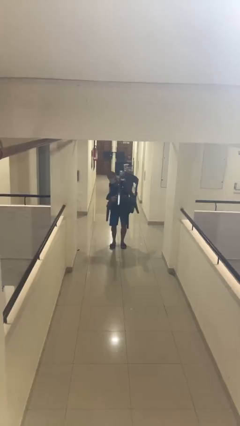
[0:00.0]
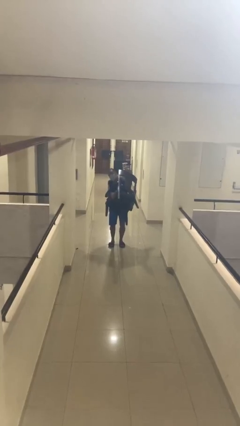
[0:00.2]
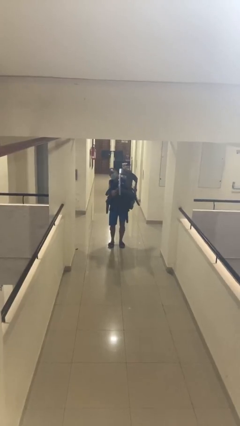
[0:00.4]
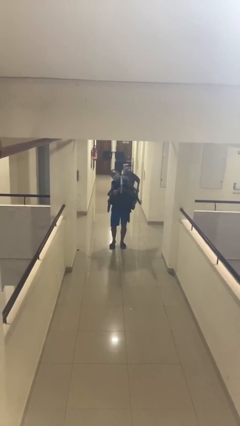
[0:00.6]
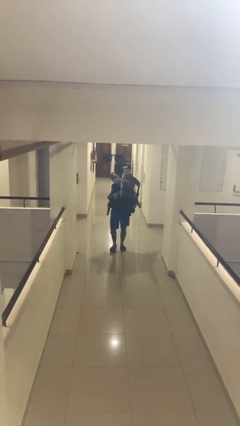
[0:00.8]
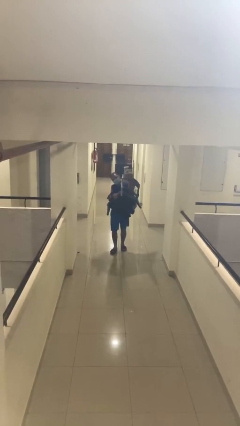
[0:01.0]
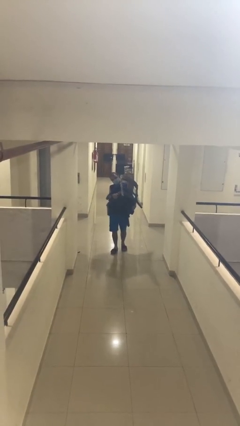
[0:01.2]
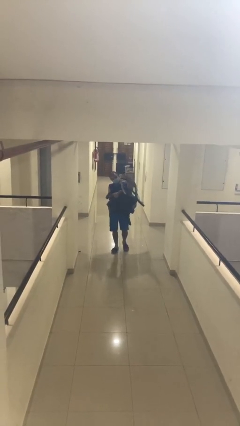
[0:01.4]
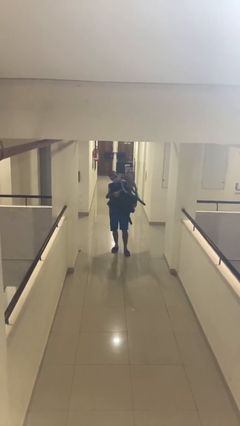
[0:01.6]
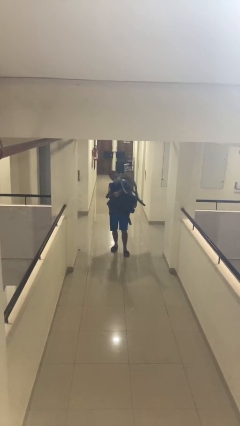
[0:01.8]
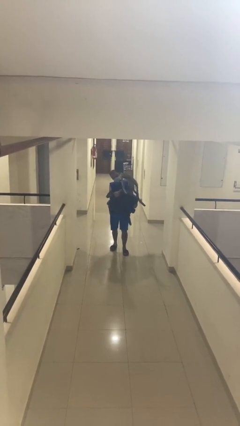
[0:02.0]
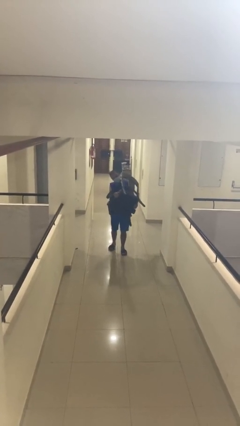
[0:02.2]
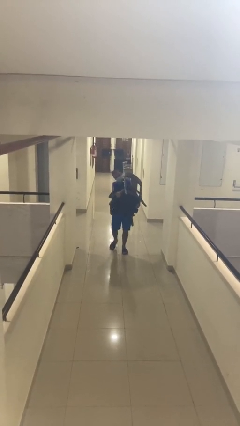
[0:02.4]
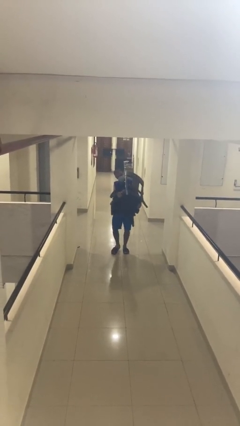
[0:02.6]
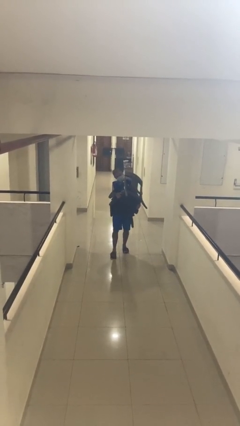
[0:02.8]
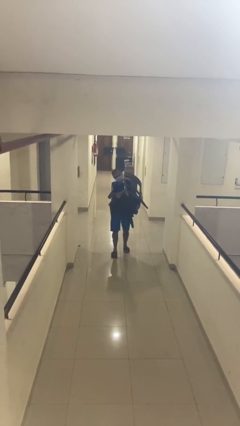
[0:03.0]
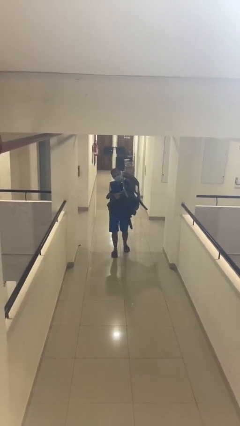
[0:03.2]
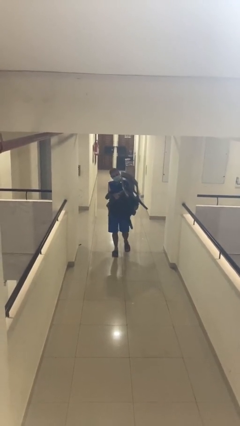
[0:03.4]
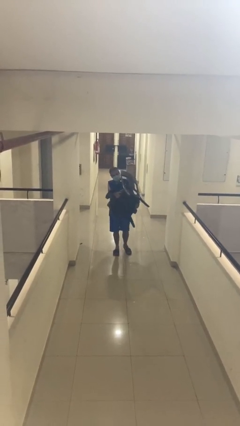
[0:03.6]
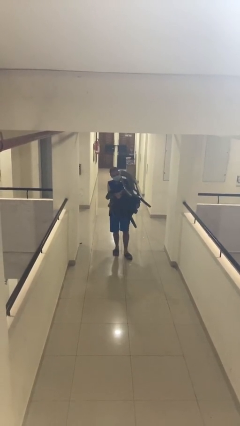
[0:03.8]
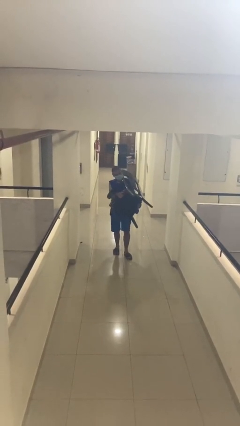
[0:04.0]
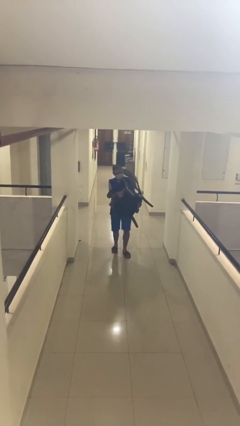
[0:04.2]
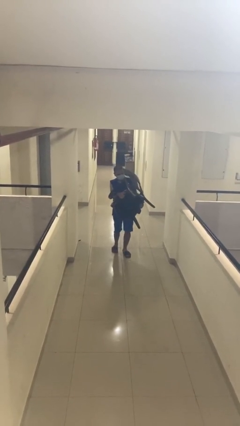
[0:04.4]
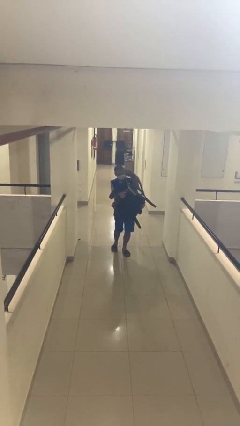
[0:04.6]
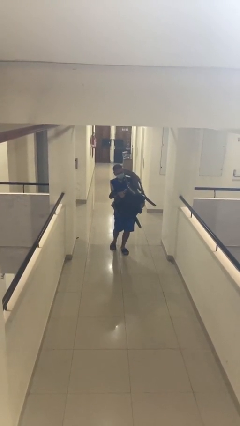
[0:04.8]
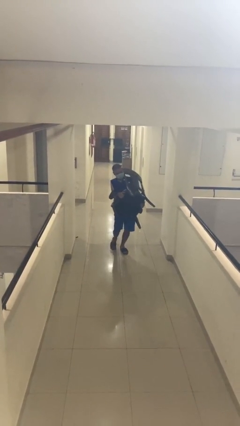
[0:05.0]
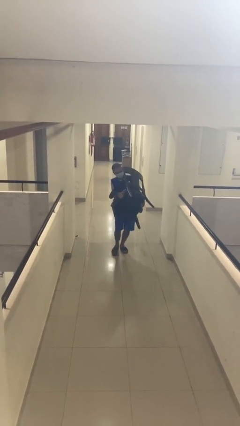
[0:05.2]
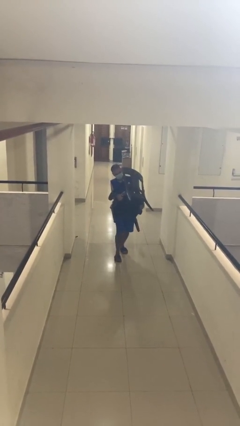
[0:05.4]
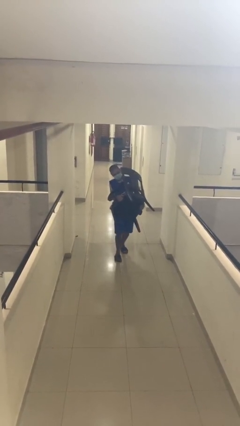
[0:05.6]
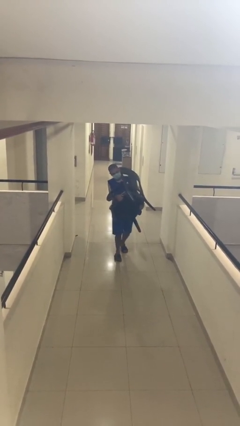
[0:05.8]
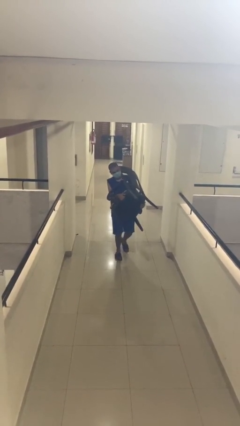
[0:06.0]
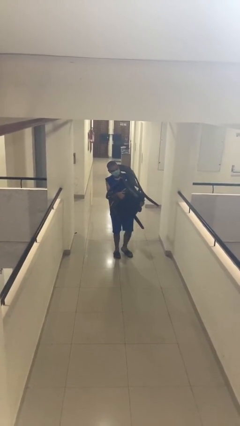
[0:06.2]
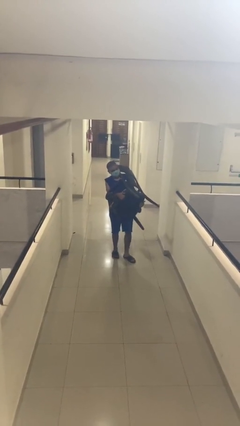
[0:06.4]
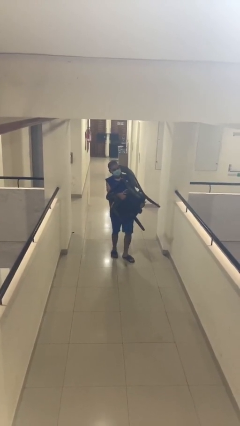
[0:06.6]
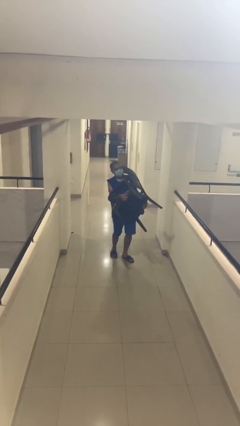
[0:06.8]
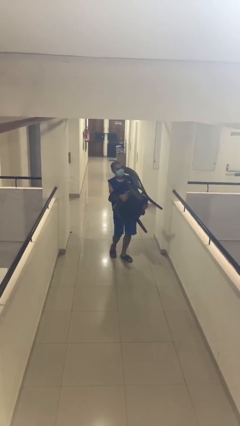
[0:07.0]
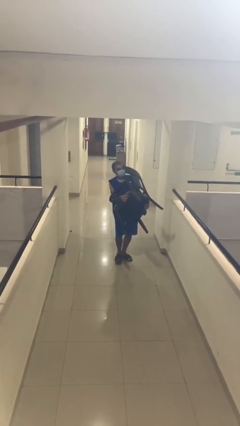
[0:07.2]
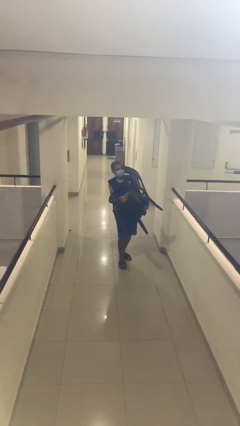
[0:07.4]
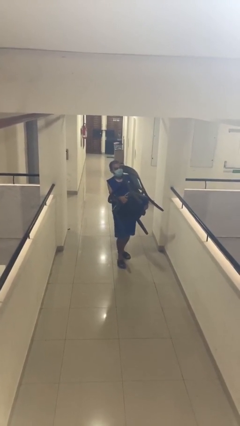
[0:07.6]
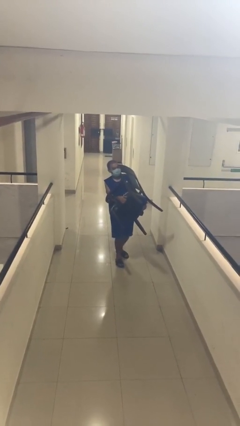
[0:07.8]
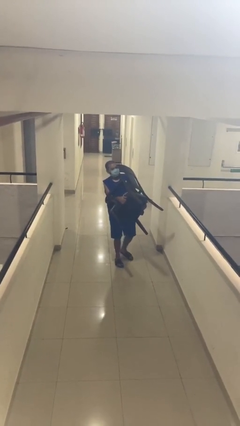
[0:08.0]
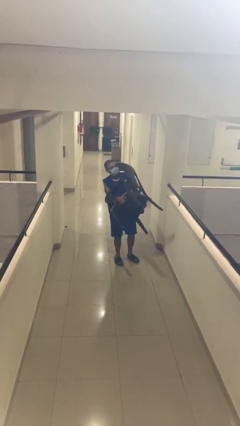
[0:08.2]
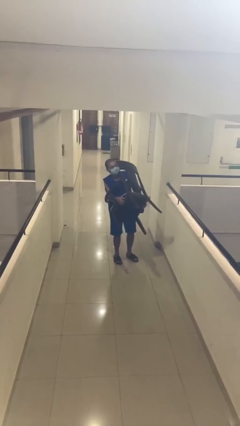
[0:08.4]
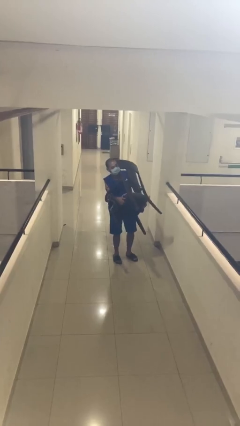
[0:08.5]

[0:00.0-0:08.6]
person carries heavy object

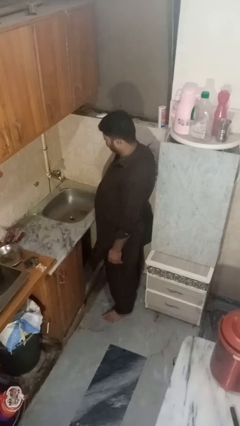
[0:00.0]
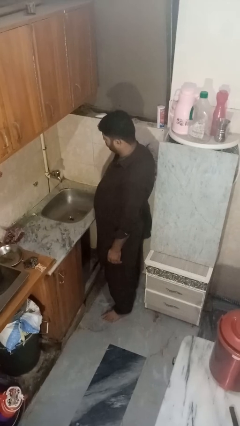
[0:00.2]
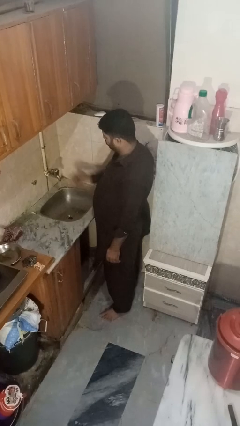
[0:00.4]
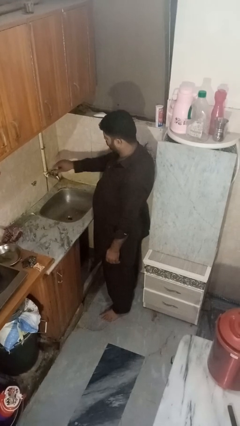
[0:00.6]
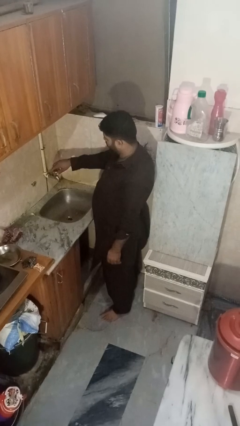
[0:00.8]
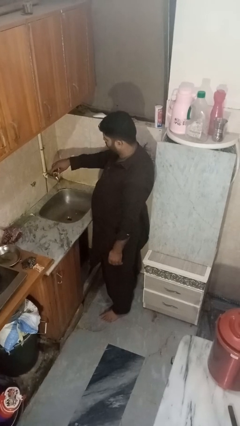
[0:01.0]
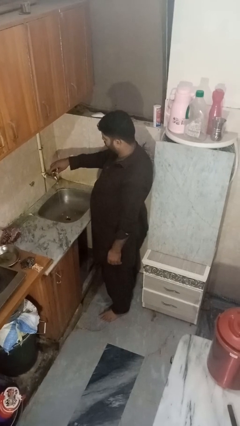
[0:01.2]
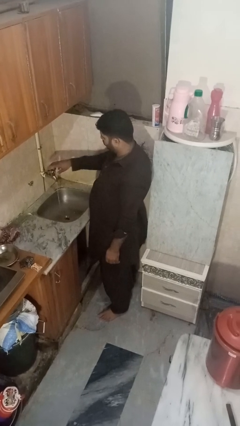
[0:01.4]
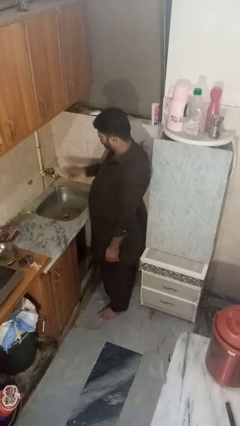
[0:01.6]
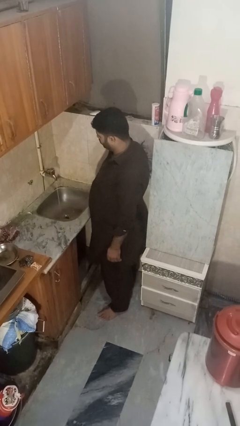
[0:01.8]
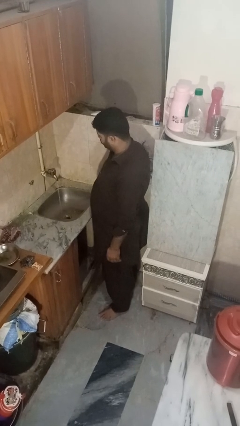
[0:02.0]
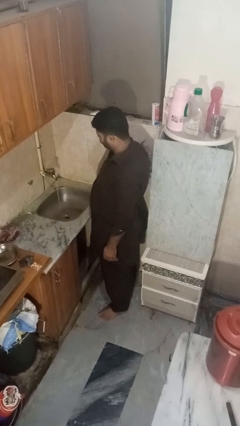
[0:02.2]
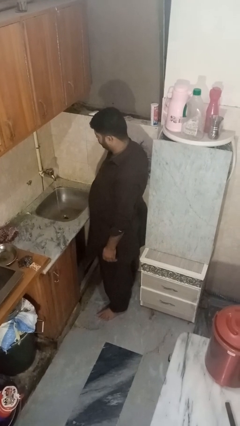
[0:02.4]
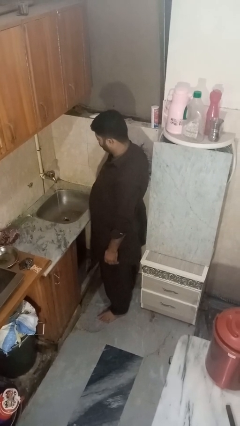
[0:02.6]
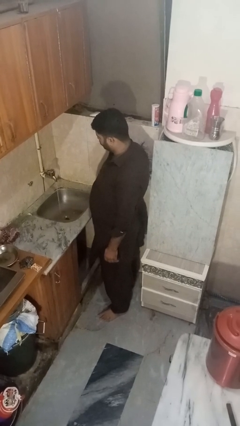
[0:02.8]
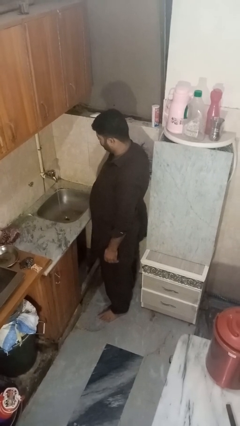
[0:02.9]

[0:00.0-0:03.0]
person turns on faucet

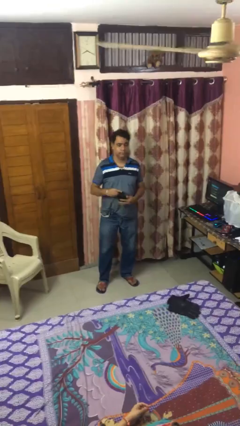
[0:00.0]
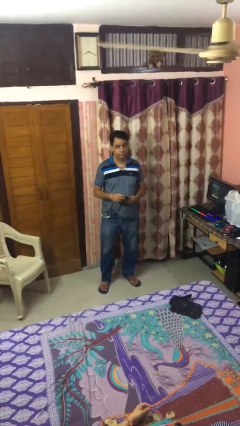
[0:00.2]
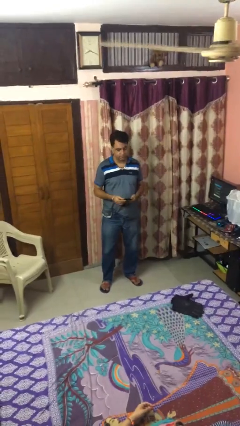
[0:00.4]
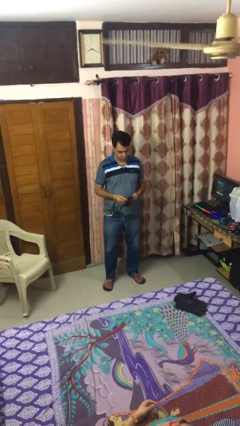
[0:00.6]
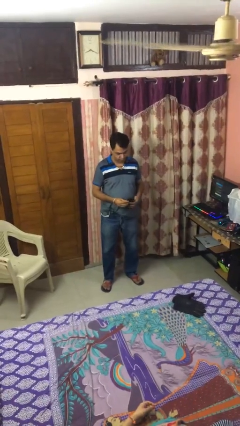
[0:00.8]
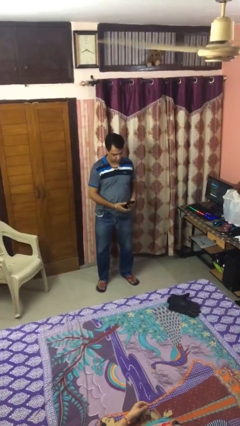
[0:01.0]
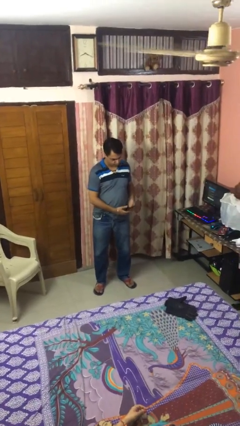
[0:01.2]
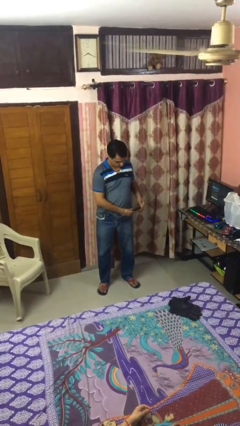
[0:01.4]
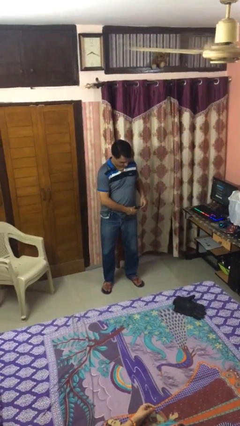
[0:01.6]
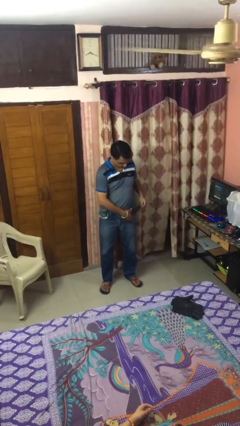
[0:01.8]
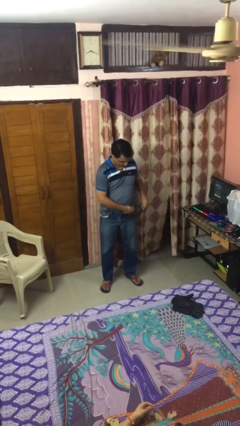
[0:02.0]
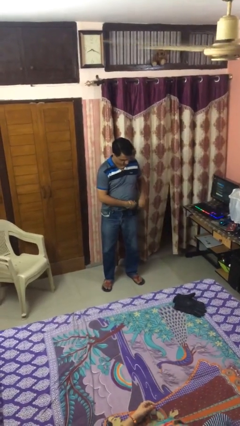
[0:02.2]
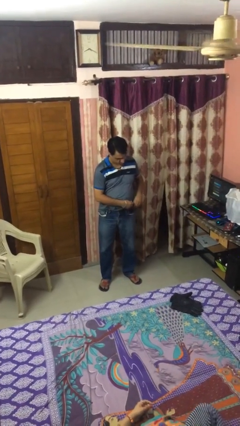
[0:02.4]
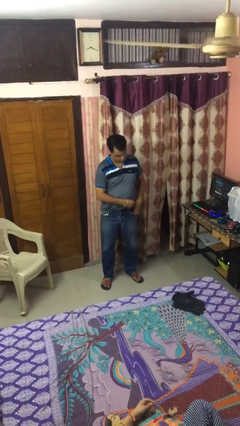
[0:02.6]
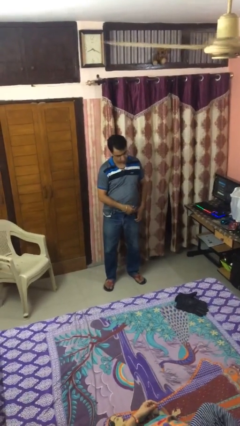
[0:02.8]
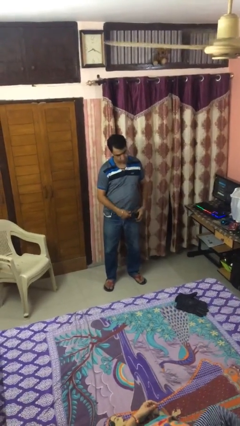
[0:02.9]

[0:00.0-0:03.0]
person puts phone into pocket

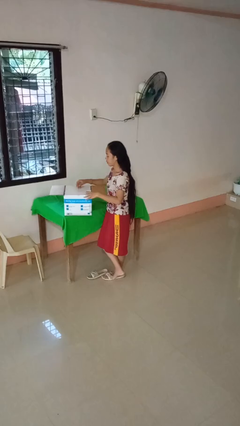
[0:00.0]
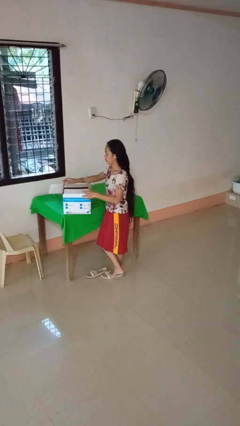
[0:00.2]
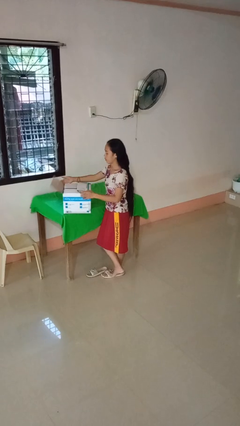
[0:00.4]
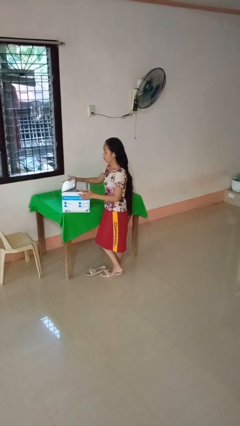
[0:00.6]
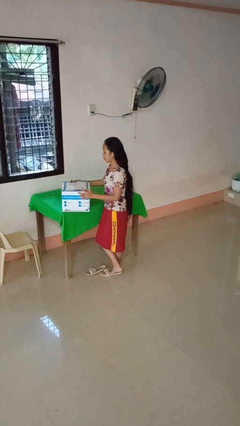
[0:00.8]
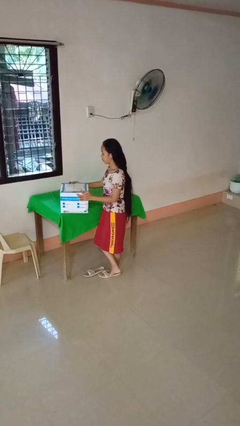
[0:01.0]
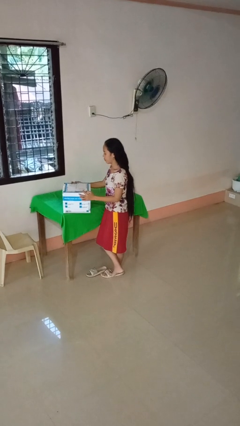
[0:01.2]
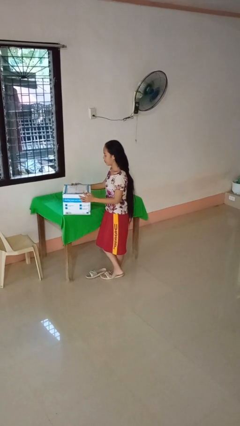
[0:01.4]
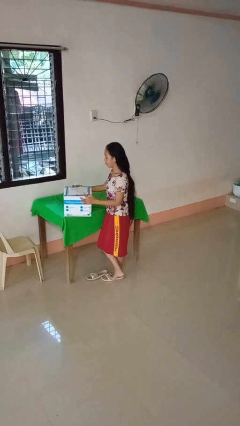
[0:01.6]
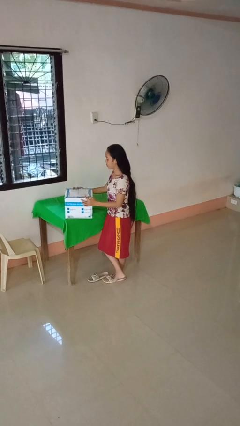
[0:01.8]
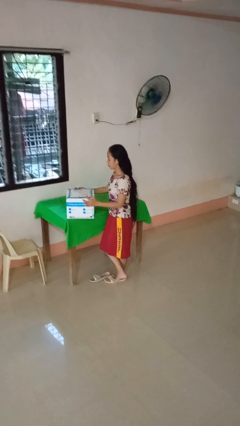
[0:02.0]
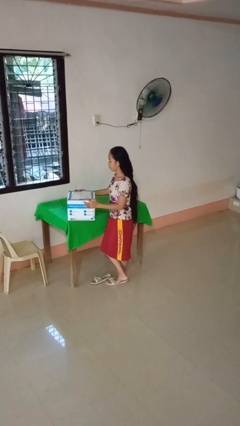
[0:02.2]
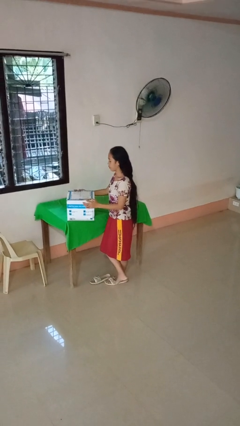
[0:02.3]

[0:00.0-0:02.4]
person closes box

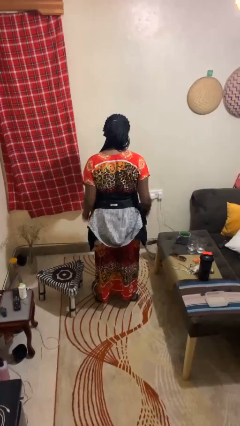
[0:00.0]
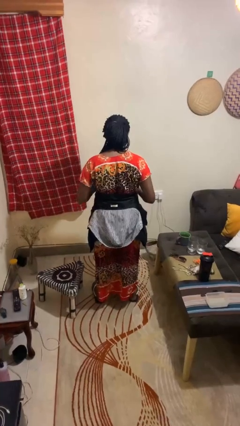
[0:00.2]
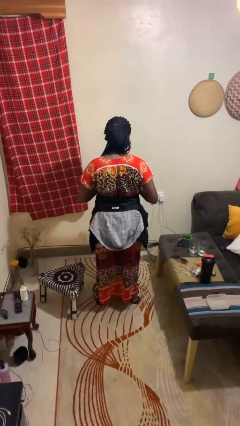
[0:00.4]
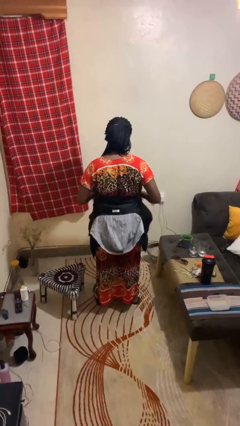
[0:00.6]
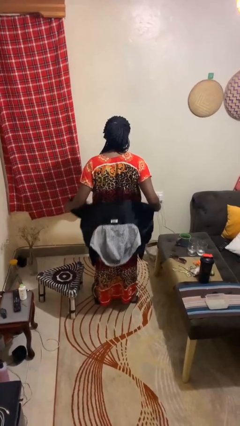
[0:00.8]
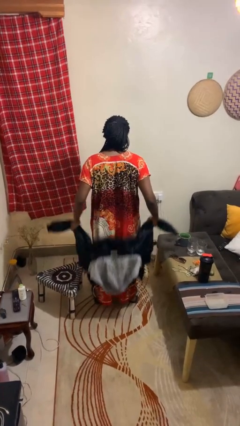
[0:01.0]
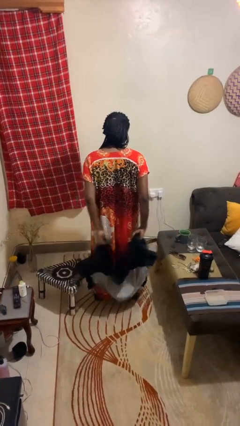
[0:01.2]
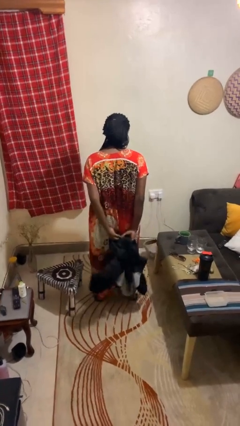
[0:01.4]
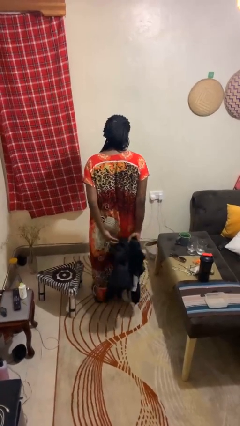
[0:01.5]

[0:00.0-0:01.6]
person unties jacket around waist
